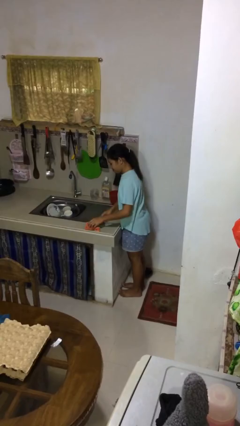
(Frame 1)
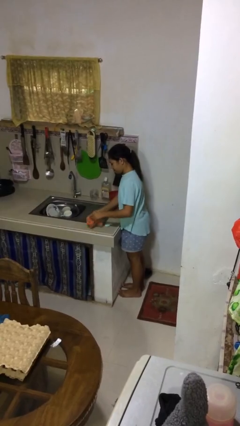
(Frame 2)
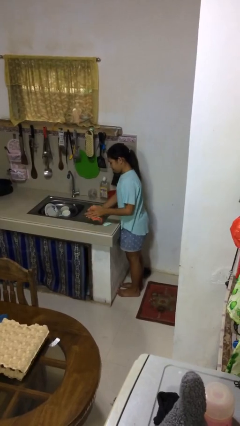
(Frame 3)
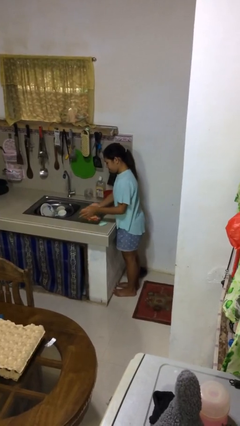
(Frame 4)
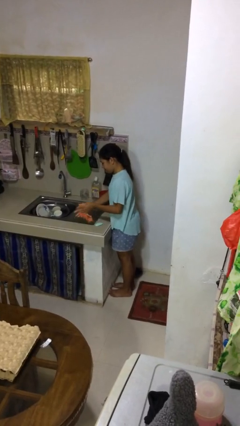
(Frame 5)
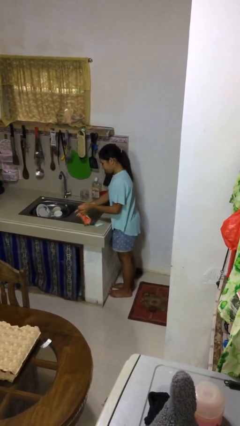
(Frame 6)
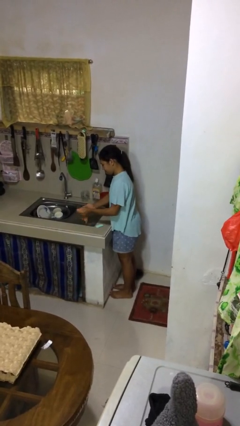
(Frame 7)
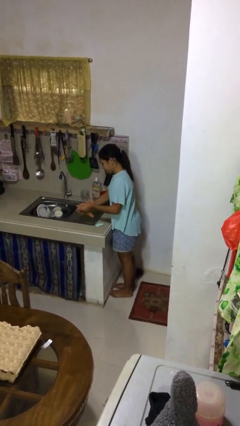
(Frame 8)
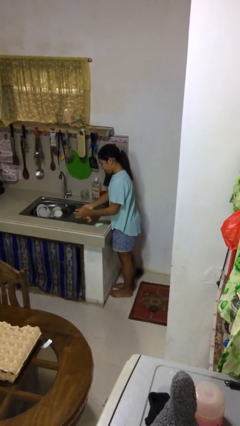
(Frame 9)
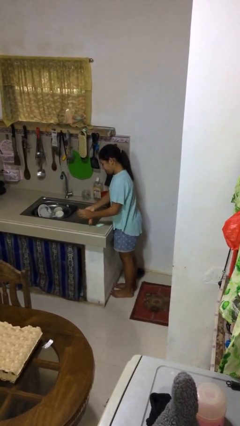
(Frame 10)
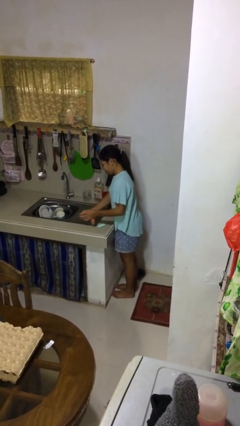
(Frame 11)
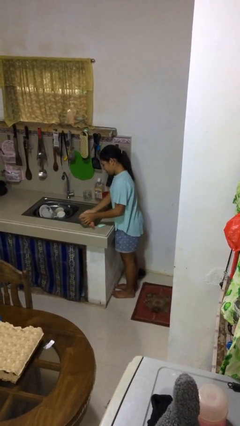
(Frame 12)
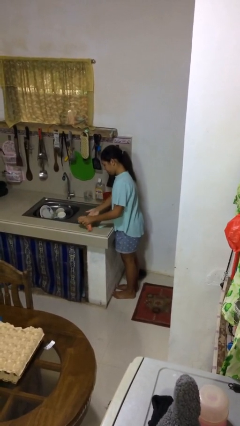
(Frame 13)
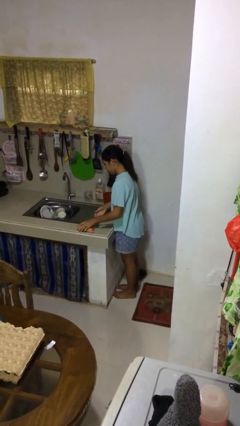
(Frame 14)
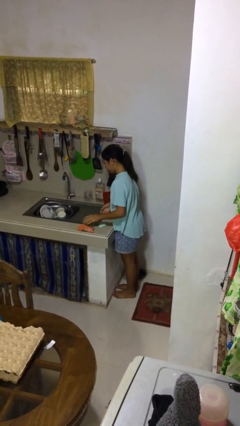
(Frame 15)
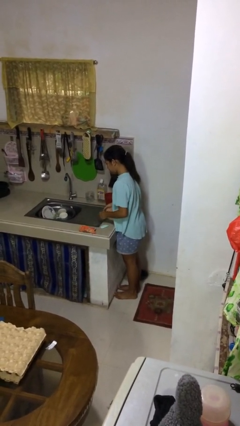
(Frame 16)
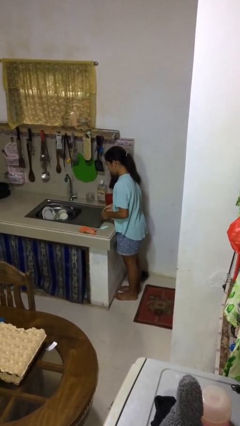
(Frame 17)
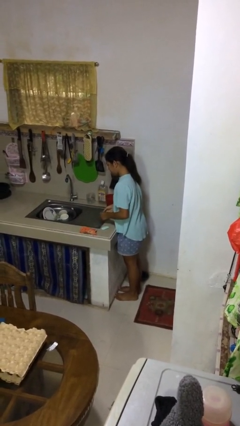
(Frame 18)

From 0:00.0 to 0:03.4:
person dries hands with towel

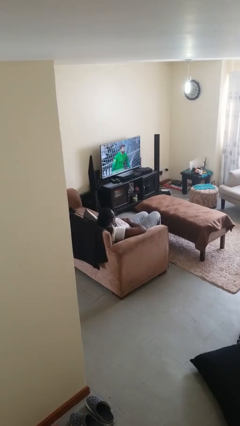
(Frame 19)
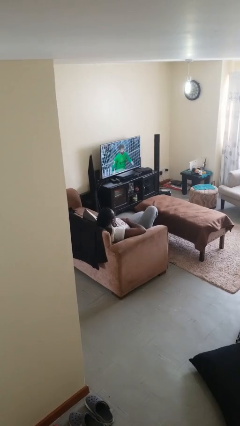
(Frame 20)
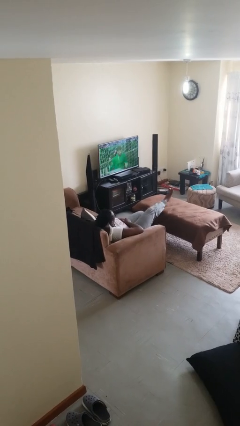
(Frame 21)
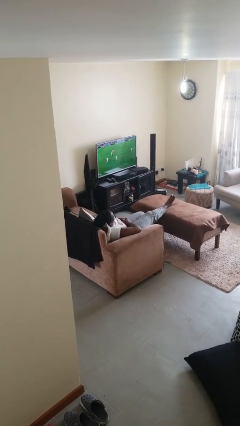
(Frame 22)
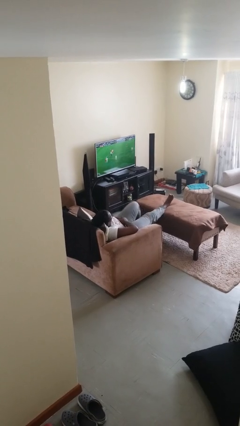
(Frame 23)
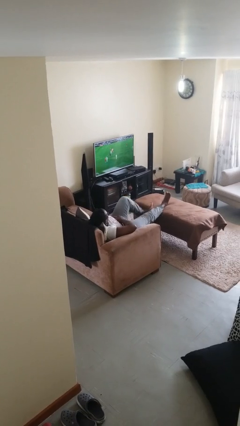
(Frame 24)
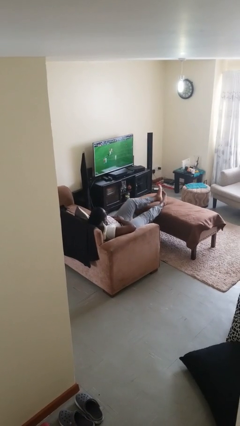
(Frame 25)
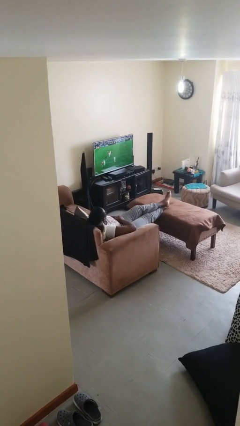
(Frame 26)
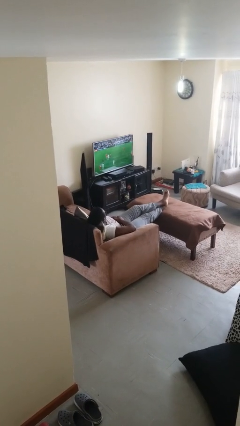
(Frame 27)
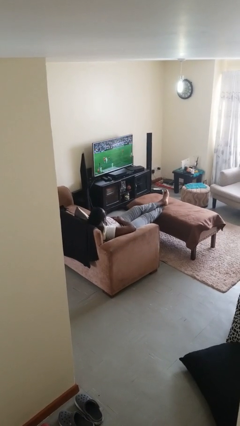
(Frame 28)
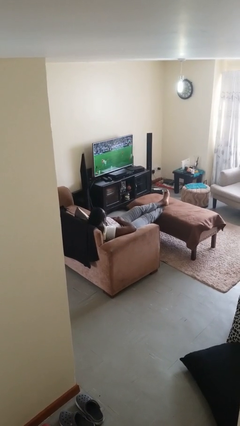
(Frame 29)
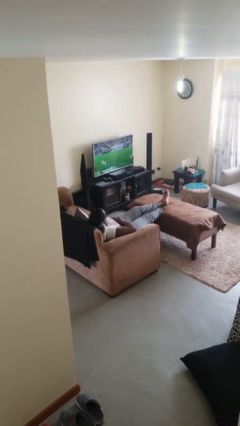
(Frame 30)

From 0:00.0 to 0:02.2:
person puts feet up

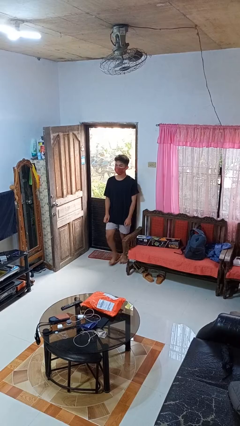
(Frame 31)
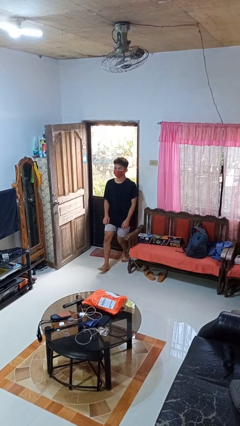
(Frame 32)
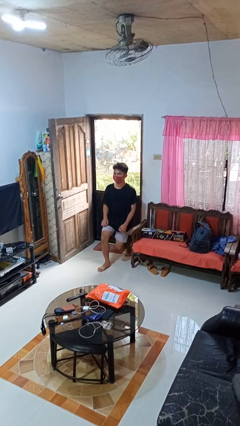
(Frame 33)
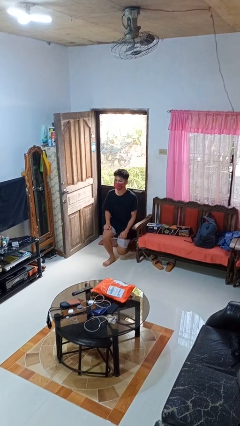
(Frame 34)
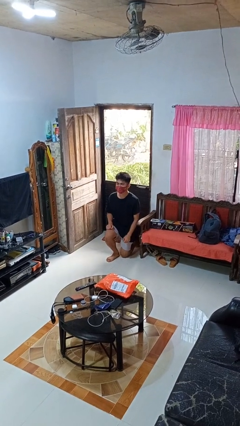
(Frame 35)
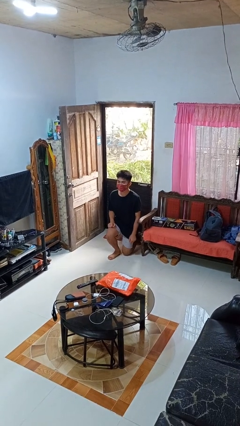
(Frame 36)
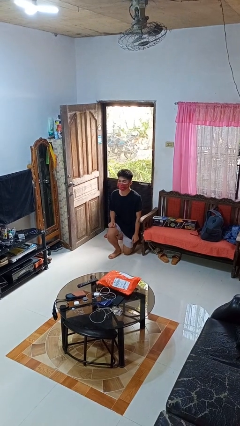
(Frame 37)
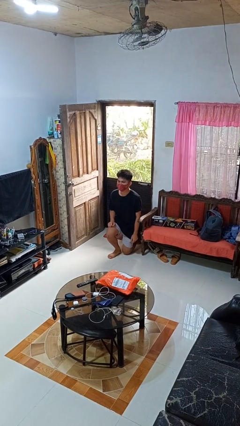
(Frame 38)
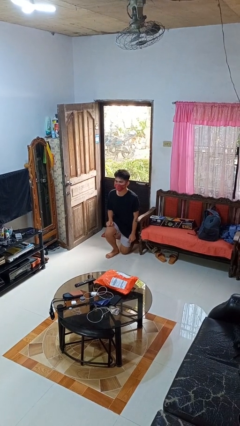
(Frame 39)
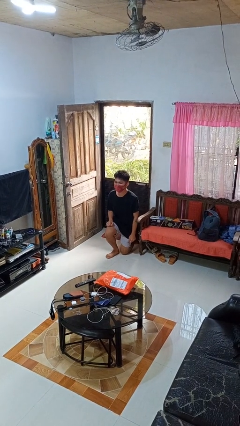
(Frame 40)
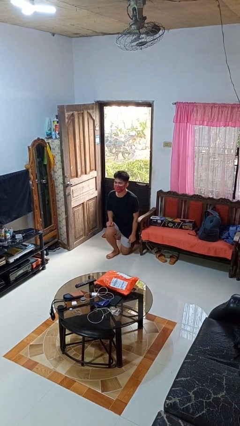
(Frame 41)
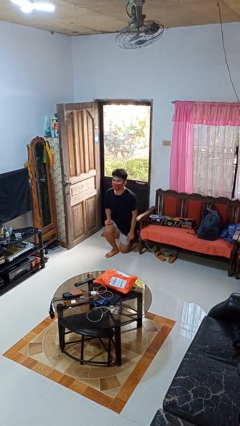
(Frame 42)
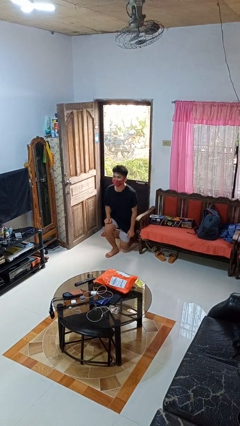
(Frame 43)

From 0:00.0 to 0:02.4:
person kneels

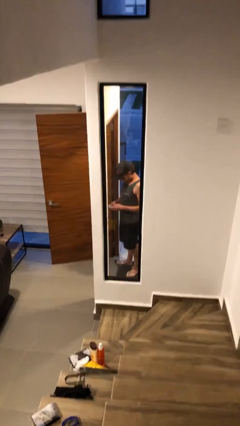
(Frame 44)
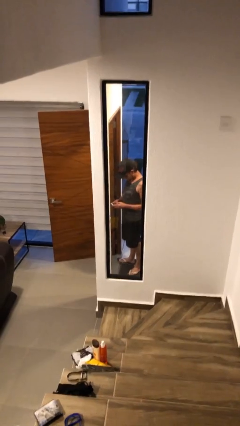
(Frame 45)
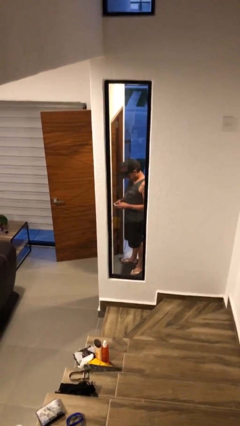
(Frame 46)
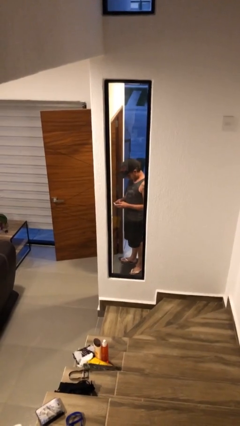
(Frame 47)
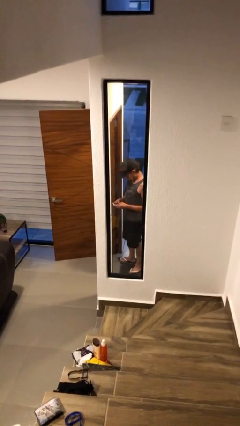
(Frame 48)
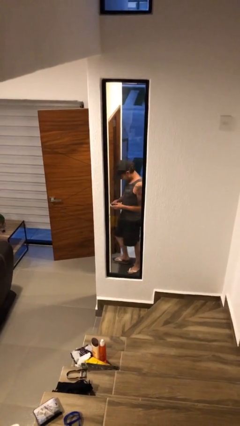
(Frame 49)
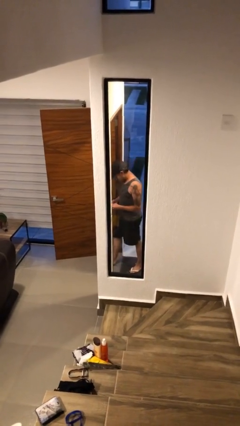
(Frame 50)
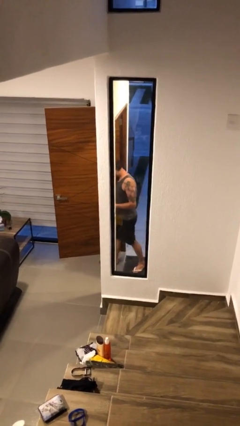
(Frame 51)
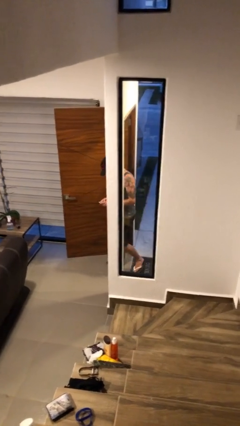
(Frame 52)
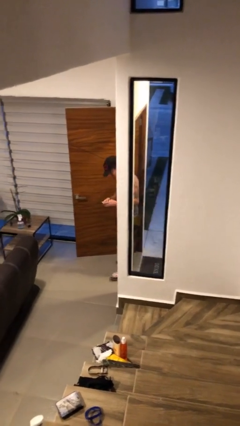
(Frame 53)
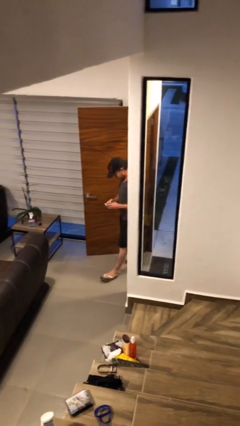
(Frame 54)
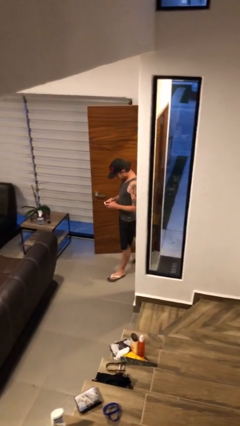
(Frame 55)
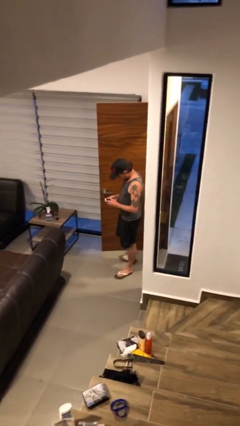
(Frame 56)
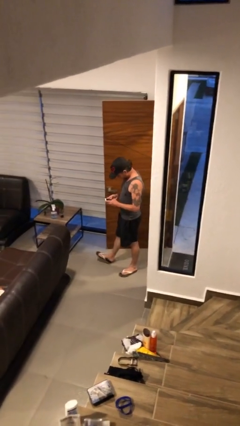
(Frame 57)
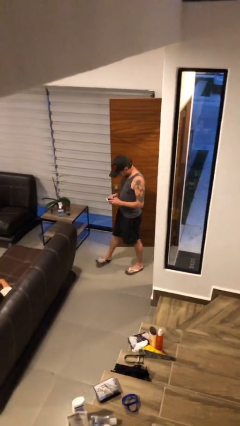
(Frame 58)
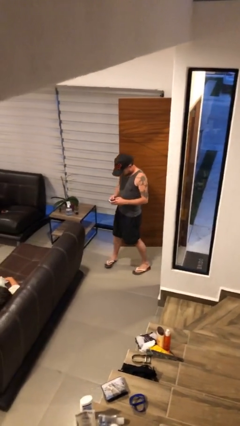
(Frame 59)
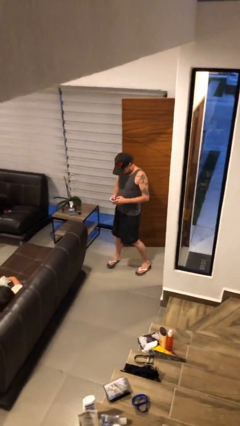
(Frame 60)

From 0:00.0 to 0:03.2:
person enters scene through structure

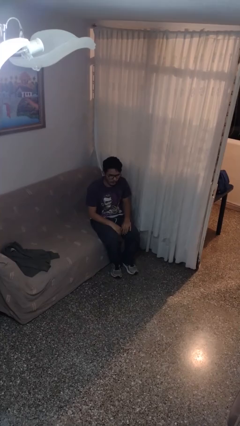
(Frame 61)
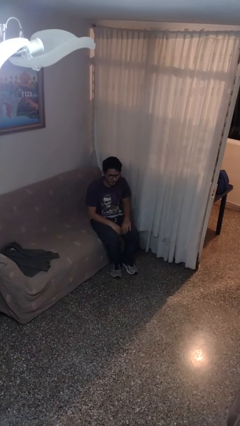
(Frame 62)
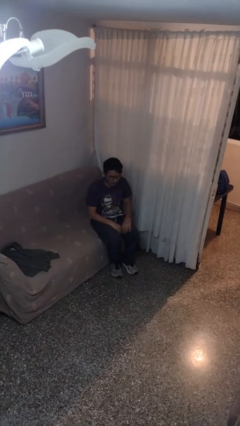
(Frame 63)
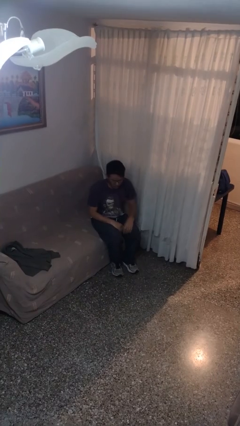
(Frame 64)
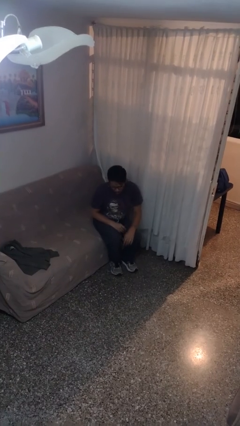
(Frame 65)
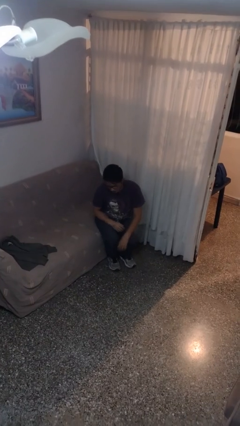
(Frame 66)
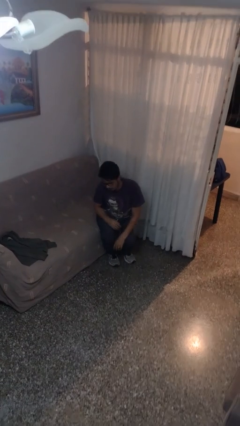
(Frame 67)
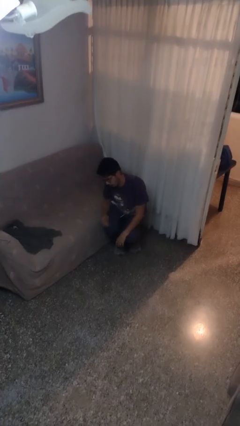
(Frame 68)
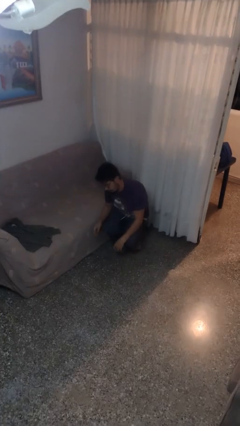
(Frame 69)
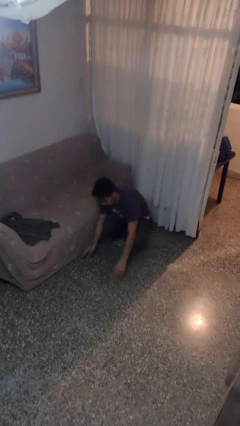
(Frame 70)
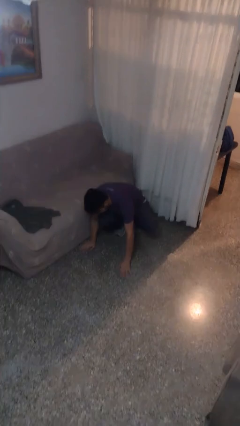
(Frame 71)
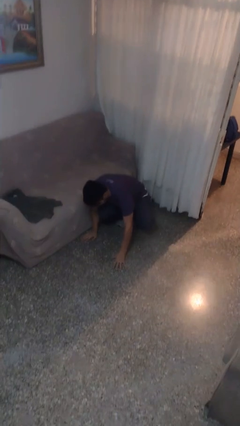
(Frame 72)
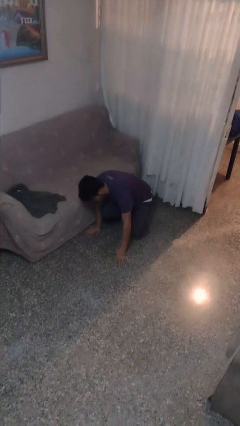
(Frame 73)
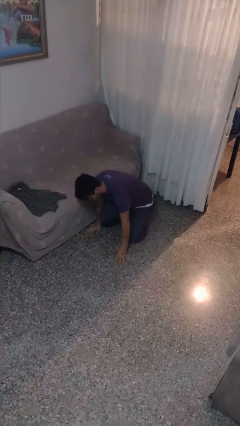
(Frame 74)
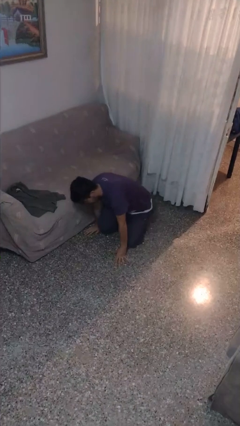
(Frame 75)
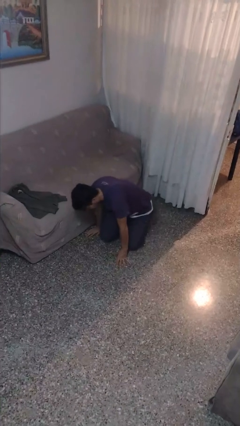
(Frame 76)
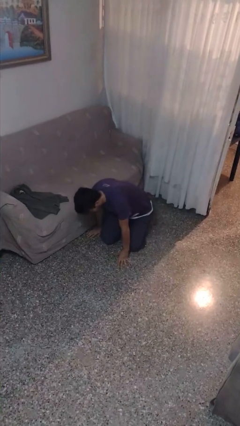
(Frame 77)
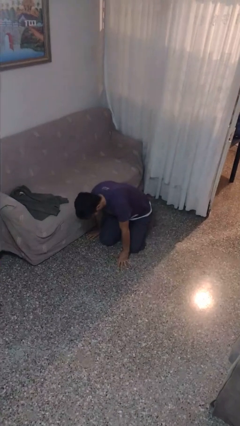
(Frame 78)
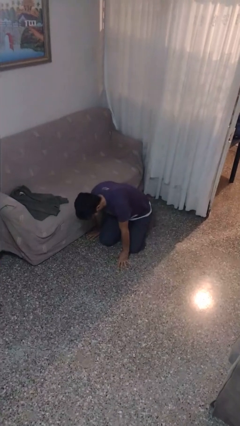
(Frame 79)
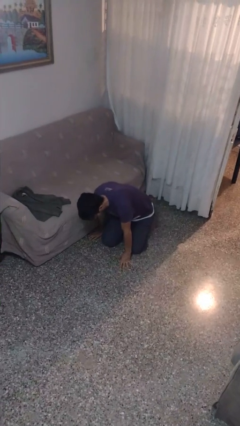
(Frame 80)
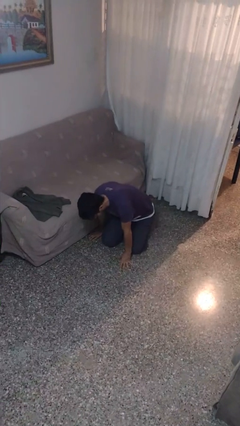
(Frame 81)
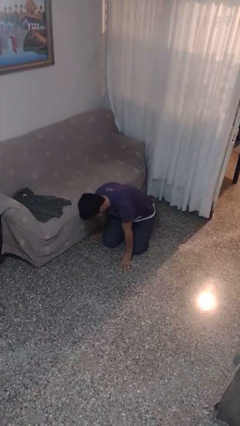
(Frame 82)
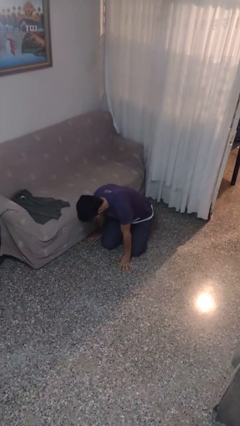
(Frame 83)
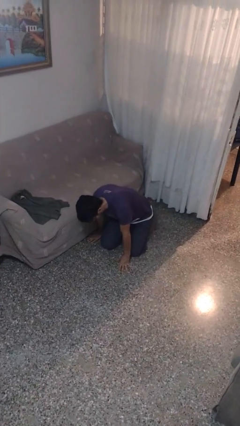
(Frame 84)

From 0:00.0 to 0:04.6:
person falls from chair

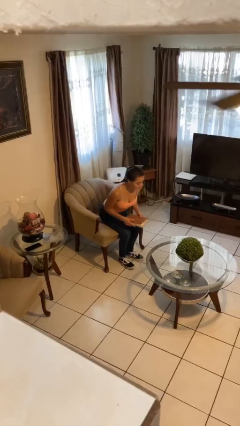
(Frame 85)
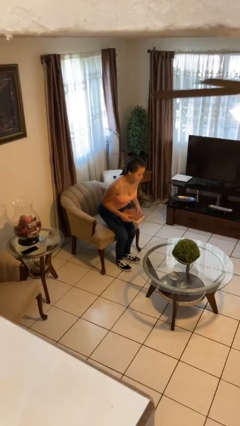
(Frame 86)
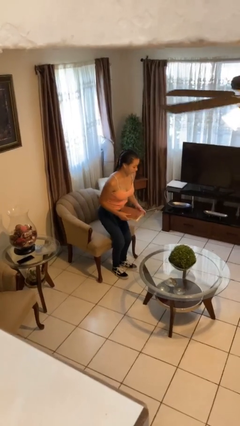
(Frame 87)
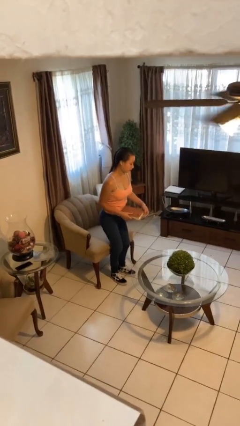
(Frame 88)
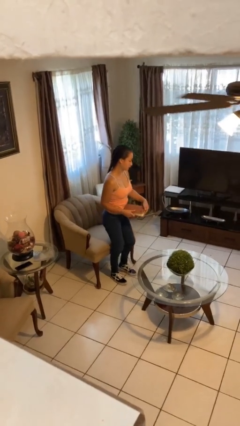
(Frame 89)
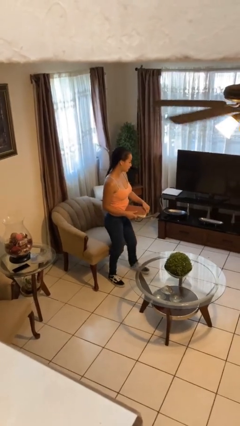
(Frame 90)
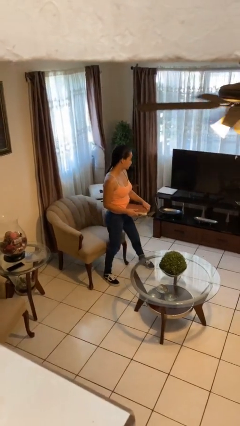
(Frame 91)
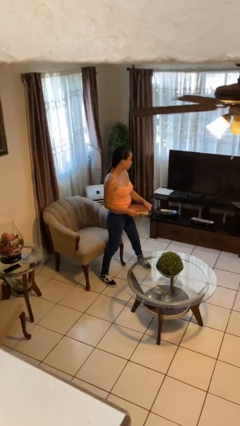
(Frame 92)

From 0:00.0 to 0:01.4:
person stands up
